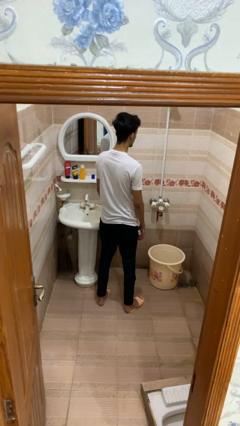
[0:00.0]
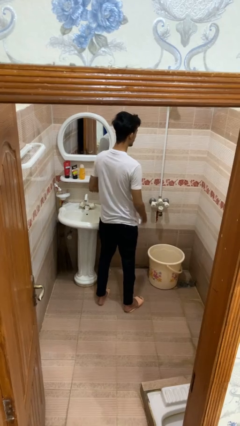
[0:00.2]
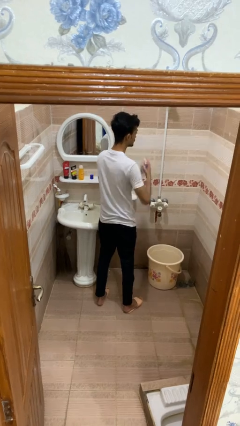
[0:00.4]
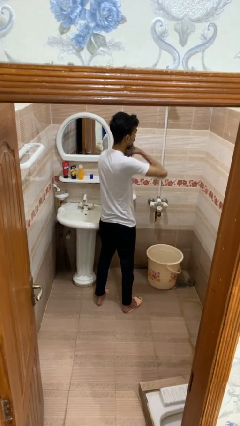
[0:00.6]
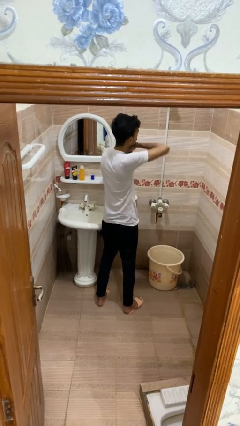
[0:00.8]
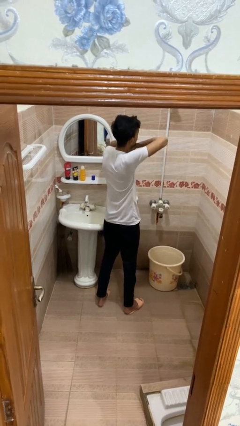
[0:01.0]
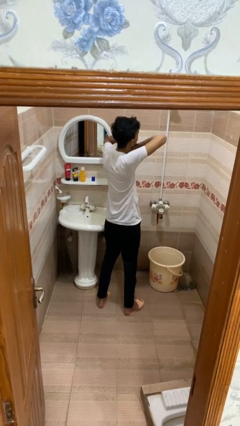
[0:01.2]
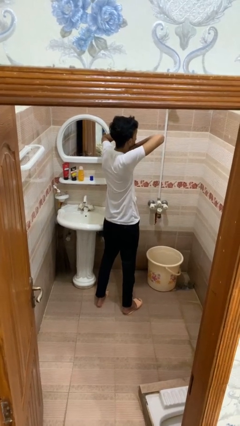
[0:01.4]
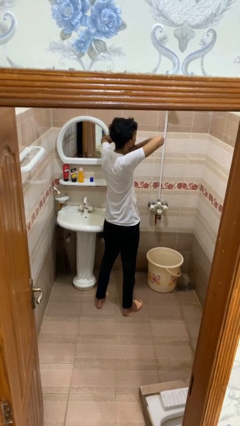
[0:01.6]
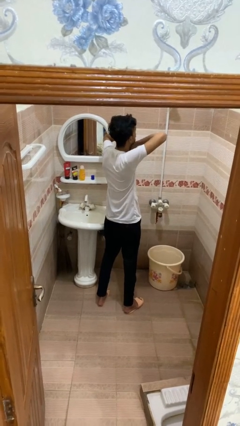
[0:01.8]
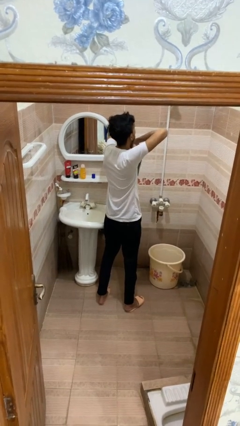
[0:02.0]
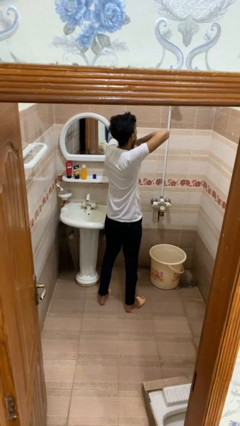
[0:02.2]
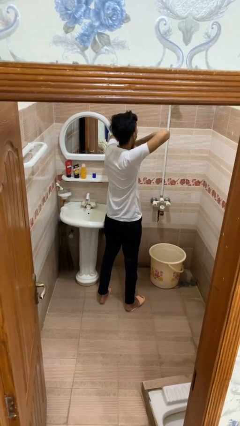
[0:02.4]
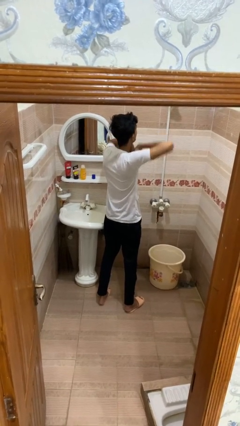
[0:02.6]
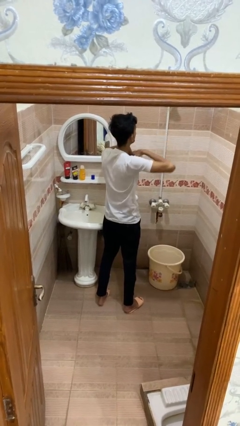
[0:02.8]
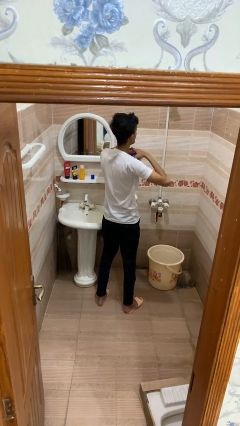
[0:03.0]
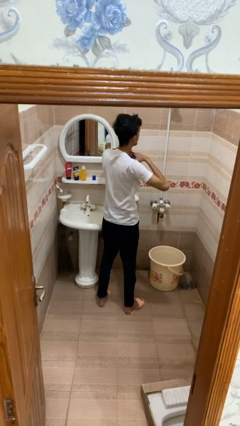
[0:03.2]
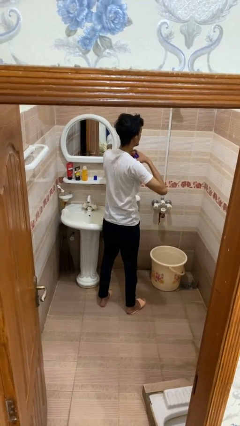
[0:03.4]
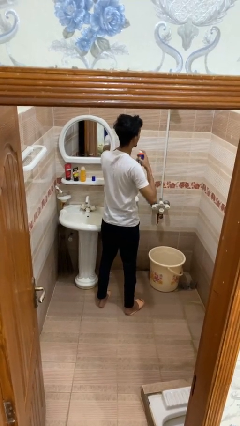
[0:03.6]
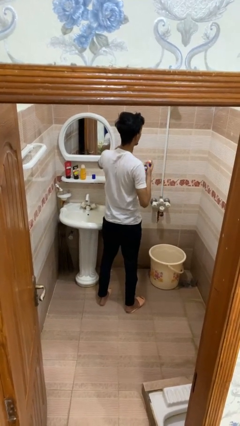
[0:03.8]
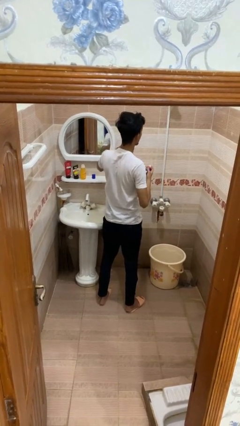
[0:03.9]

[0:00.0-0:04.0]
person applies deodorant

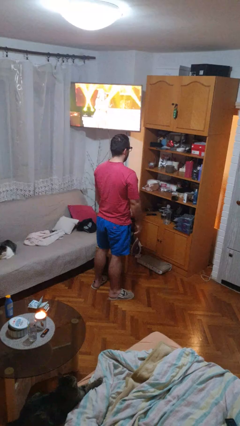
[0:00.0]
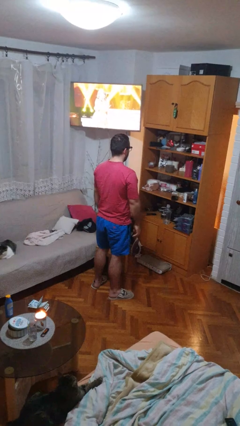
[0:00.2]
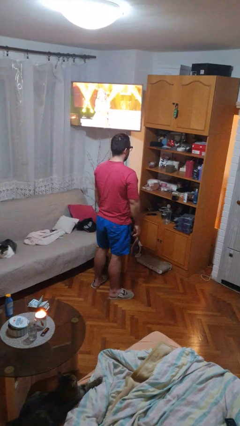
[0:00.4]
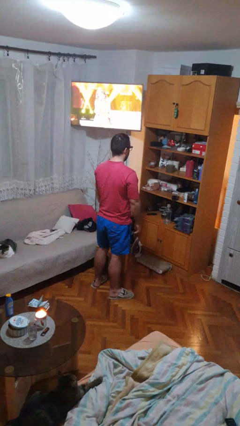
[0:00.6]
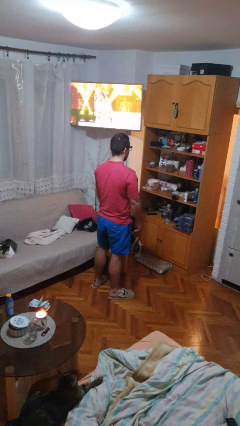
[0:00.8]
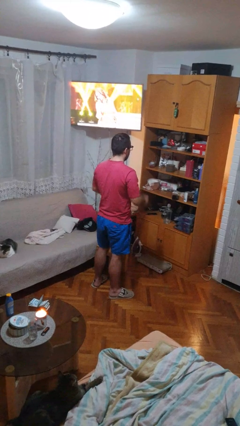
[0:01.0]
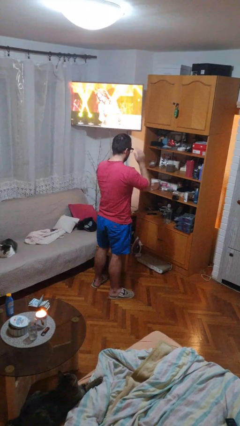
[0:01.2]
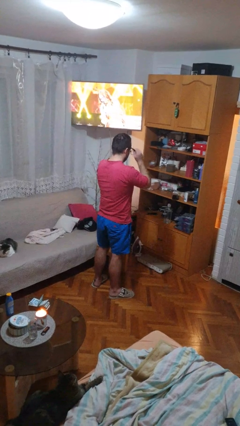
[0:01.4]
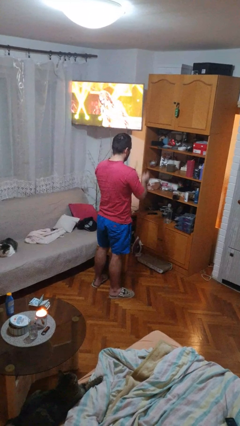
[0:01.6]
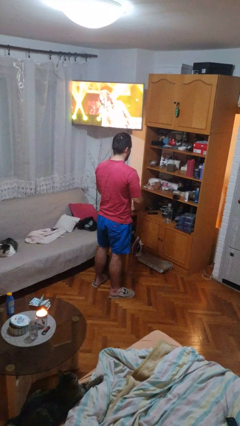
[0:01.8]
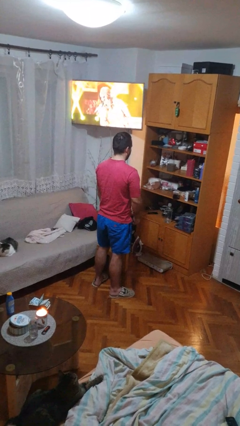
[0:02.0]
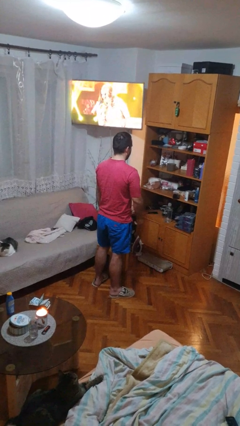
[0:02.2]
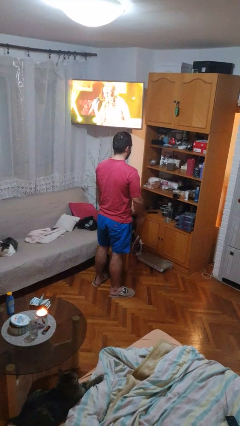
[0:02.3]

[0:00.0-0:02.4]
person takes off glasses

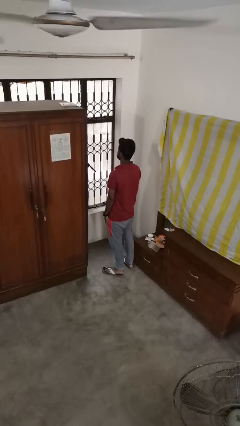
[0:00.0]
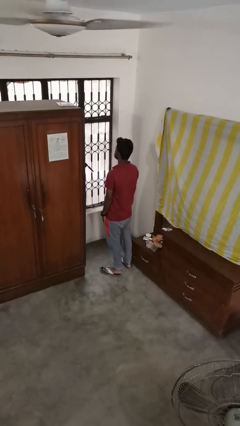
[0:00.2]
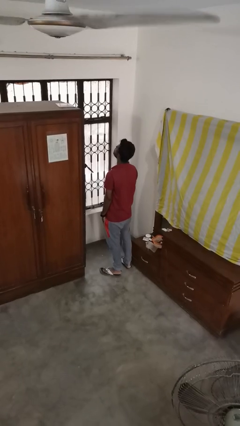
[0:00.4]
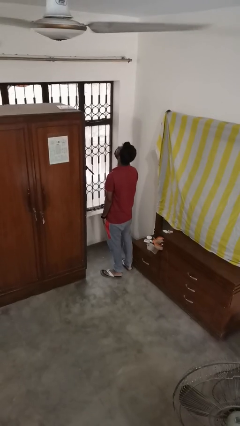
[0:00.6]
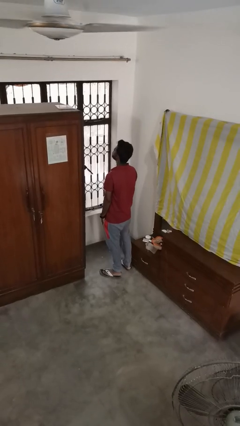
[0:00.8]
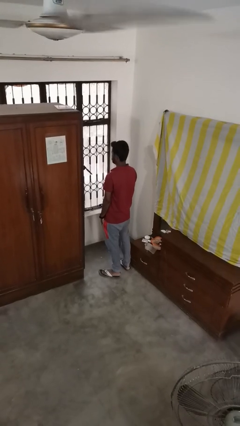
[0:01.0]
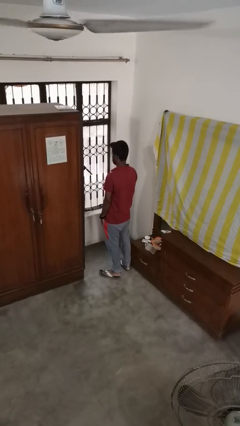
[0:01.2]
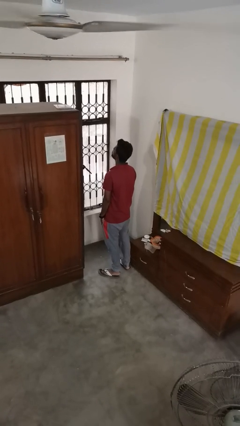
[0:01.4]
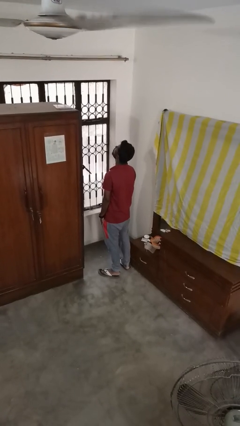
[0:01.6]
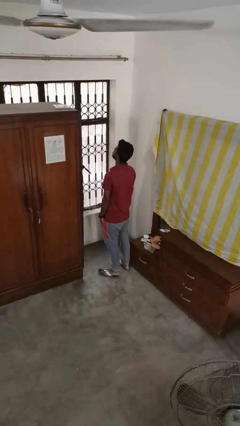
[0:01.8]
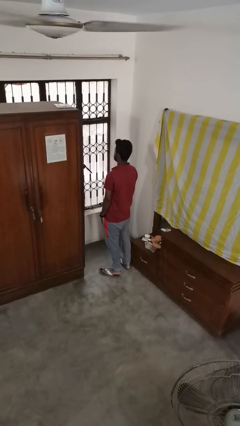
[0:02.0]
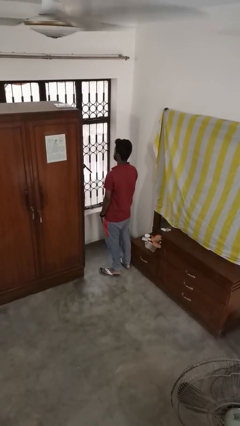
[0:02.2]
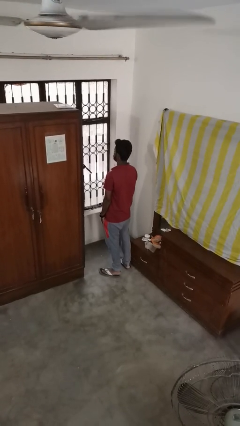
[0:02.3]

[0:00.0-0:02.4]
person nods head

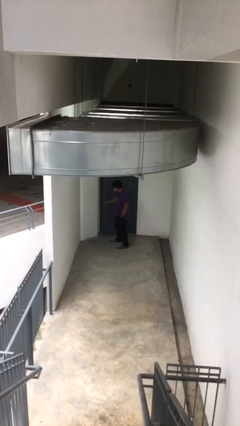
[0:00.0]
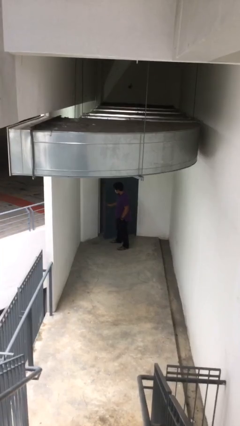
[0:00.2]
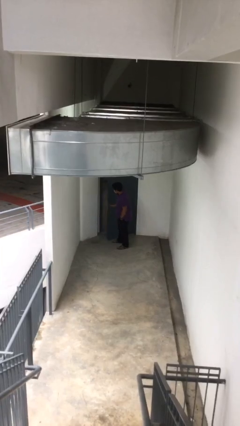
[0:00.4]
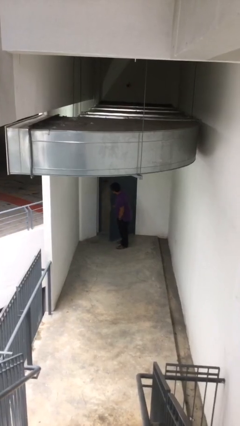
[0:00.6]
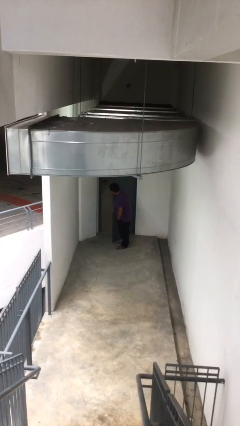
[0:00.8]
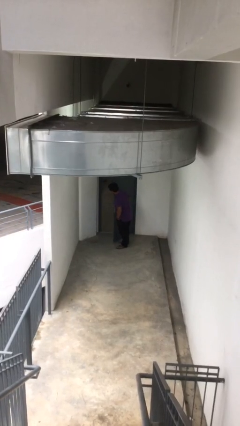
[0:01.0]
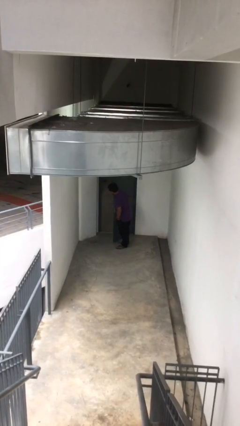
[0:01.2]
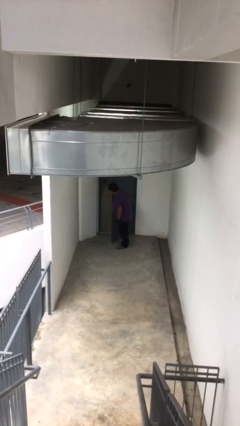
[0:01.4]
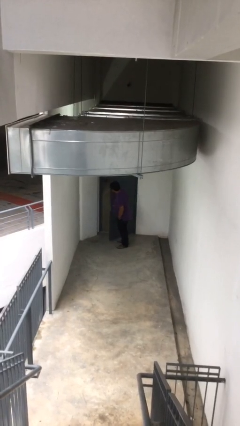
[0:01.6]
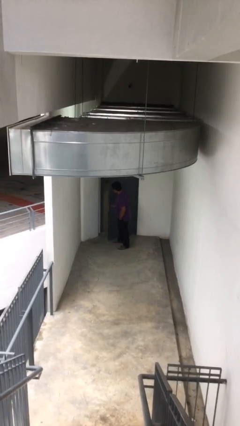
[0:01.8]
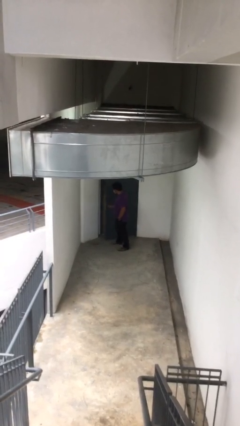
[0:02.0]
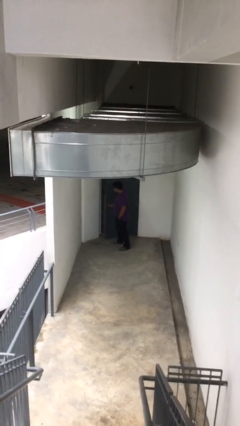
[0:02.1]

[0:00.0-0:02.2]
person opens facility door

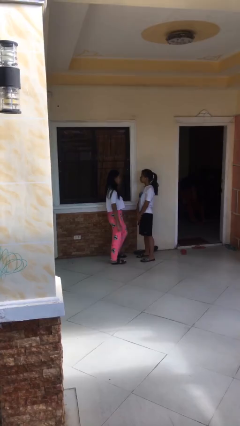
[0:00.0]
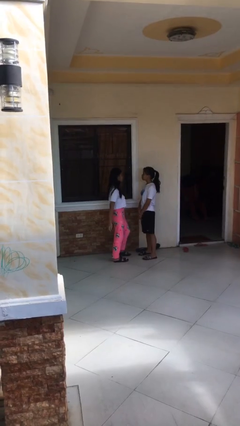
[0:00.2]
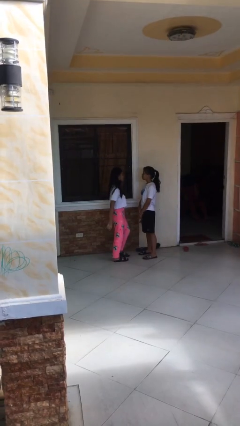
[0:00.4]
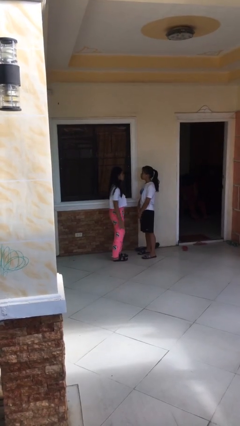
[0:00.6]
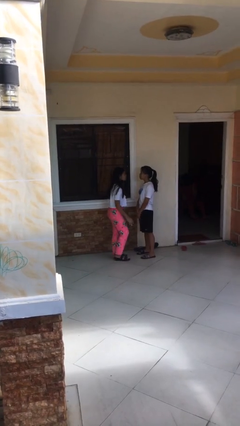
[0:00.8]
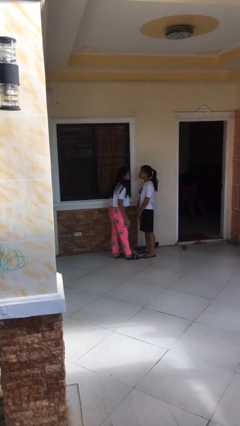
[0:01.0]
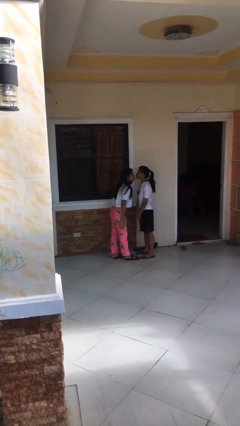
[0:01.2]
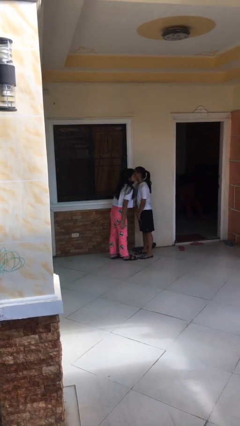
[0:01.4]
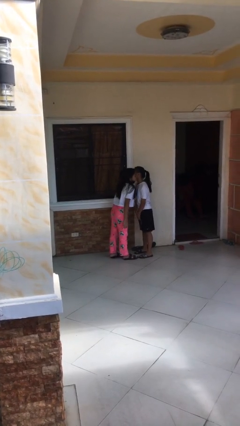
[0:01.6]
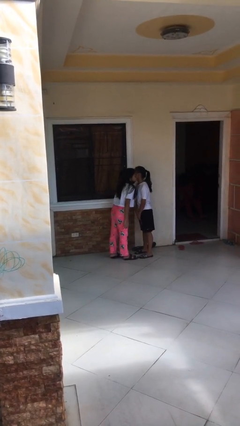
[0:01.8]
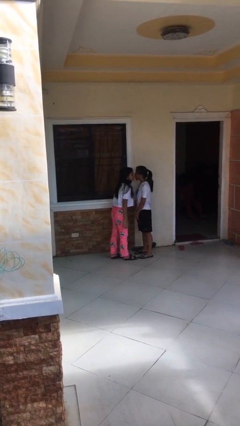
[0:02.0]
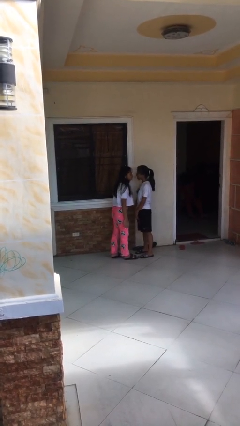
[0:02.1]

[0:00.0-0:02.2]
person kisses cheek of person

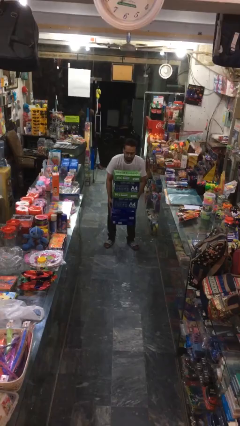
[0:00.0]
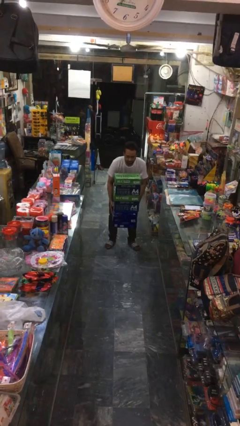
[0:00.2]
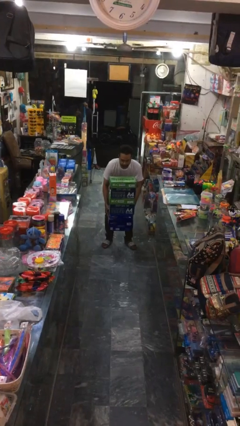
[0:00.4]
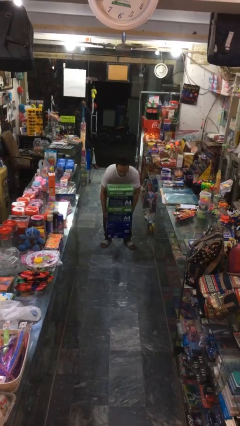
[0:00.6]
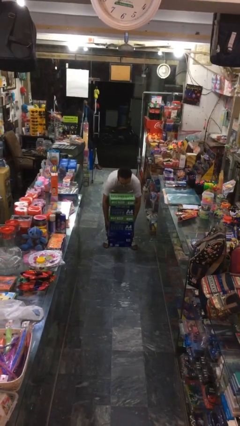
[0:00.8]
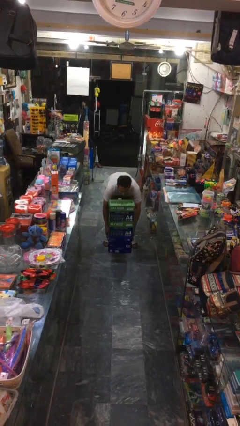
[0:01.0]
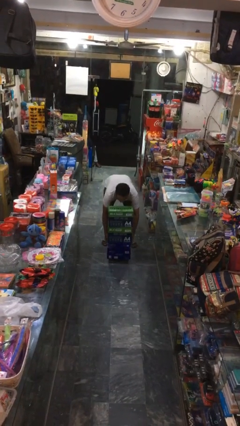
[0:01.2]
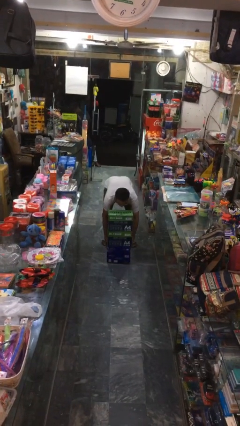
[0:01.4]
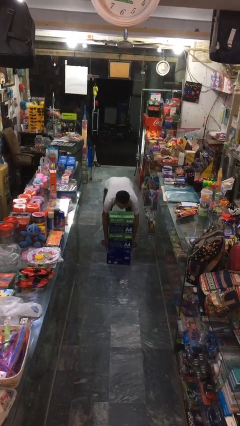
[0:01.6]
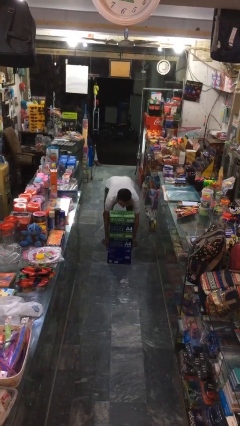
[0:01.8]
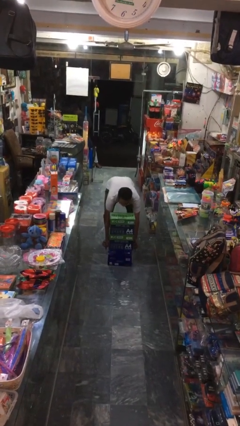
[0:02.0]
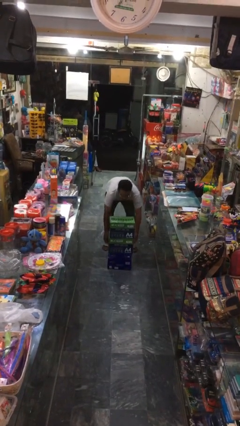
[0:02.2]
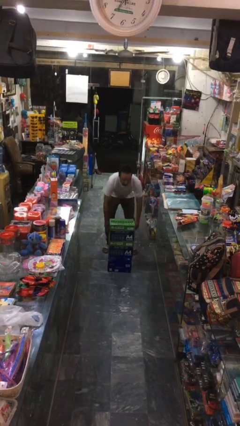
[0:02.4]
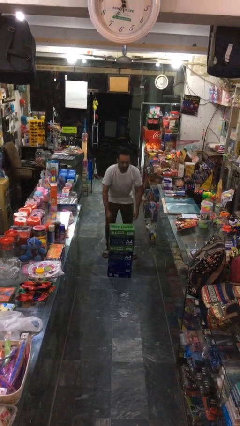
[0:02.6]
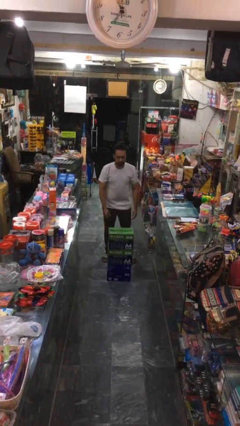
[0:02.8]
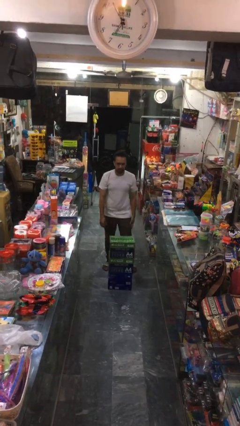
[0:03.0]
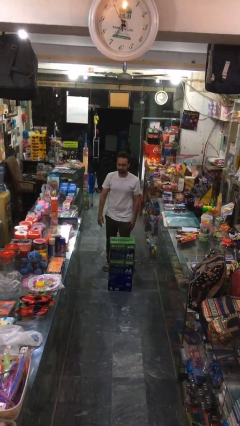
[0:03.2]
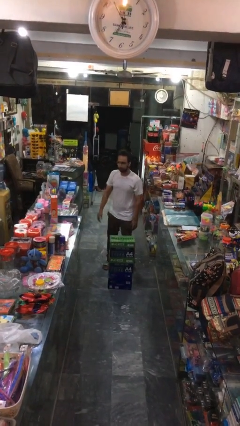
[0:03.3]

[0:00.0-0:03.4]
person puts down object on floor

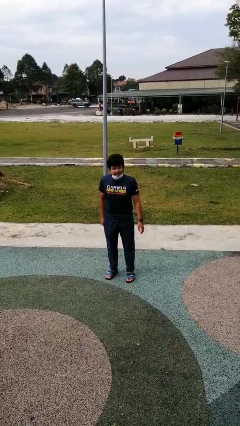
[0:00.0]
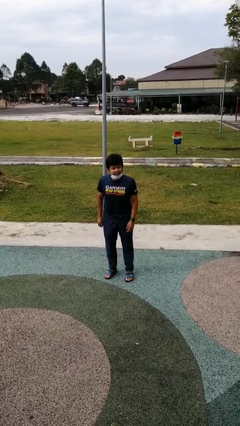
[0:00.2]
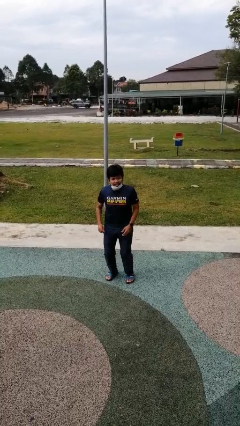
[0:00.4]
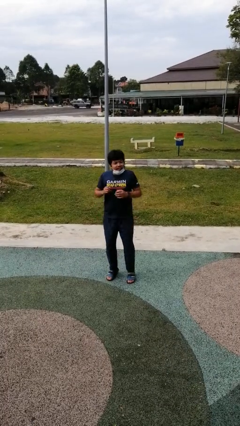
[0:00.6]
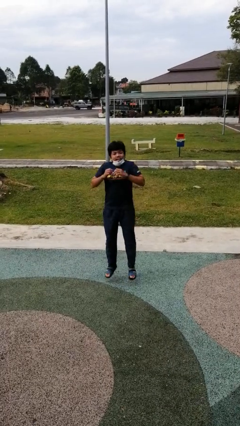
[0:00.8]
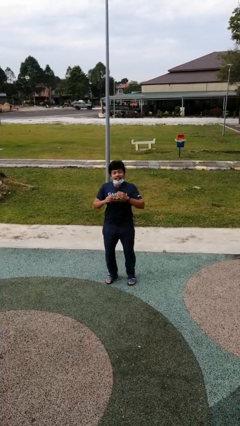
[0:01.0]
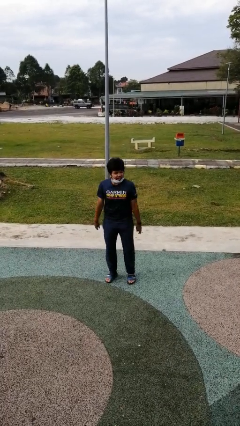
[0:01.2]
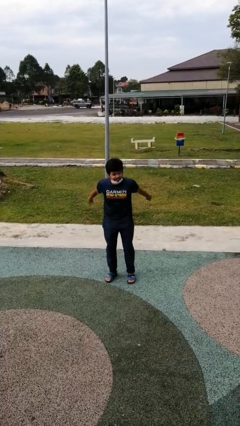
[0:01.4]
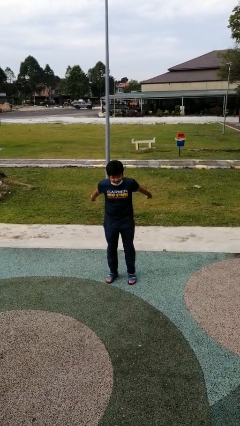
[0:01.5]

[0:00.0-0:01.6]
person jumps
